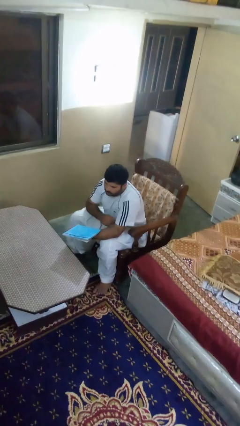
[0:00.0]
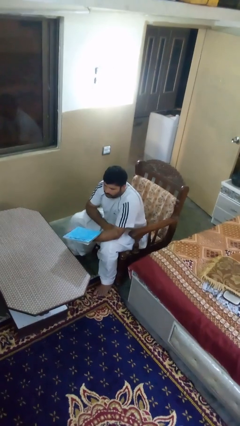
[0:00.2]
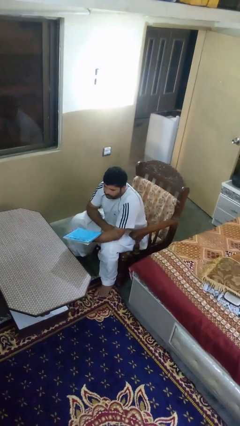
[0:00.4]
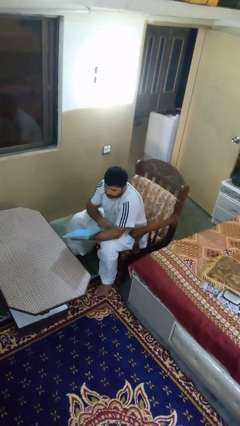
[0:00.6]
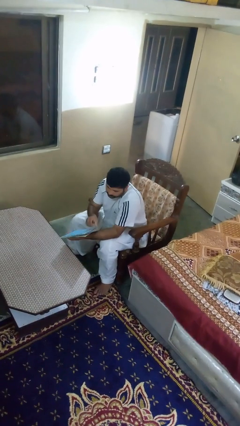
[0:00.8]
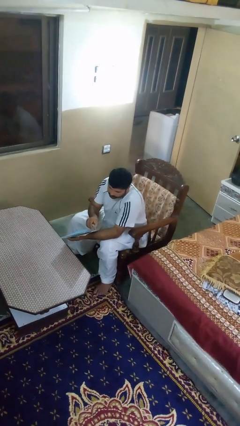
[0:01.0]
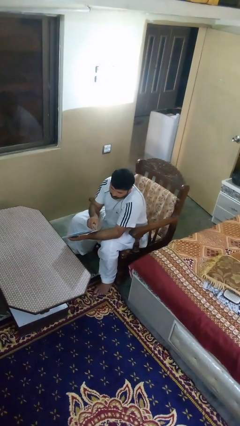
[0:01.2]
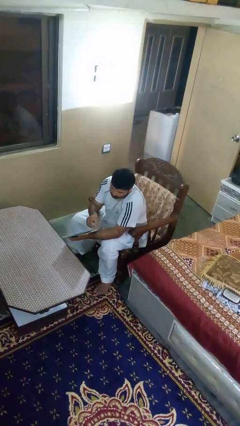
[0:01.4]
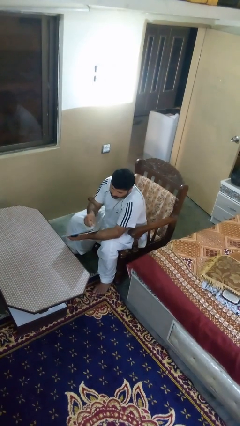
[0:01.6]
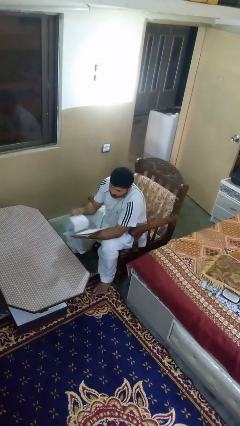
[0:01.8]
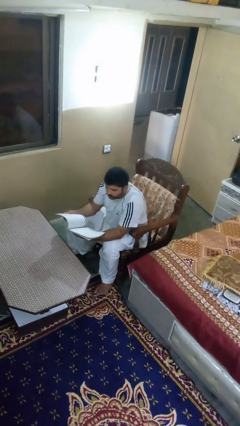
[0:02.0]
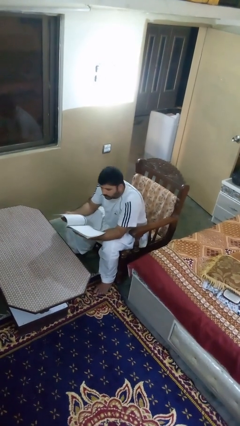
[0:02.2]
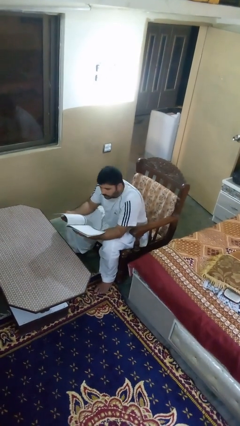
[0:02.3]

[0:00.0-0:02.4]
person reads magazine

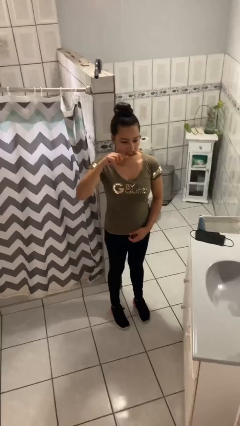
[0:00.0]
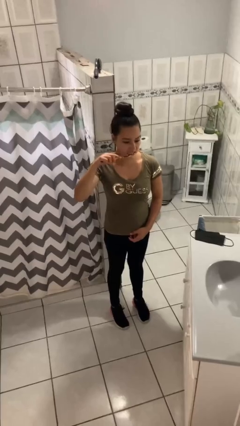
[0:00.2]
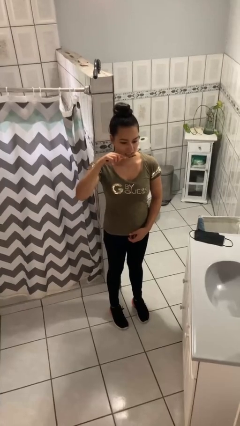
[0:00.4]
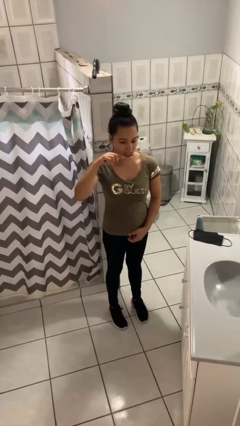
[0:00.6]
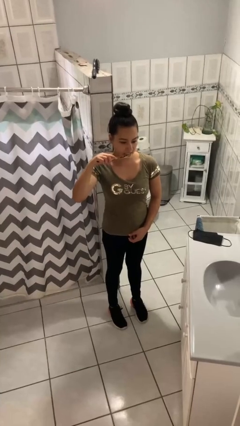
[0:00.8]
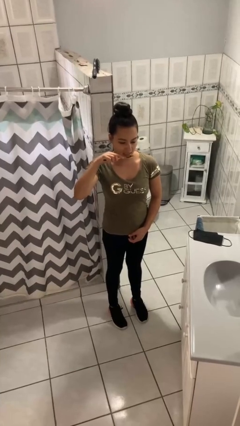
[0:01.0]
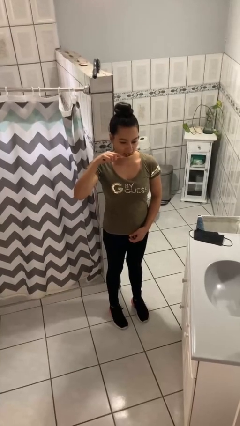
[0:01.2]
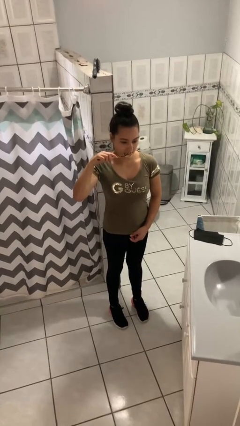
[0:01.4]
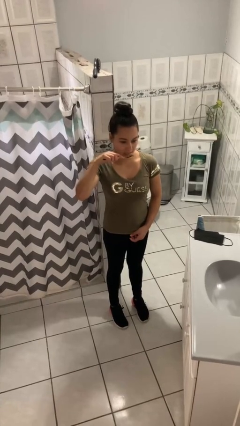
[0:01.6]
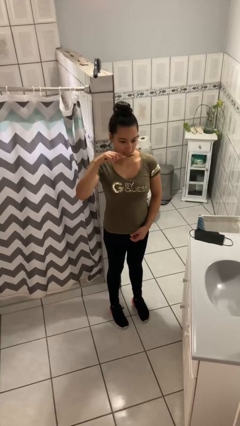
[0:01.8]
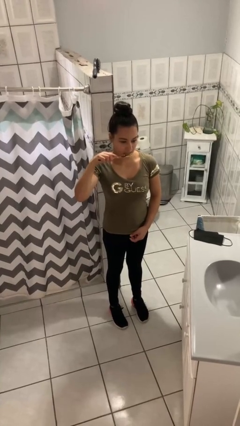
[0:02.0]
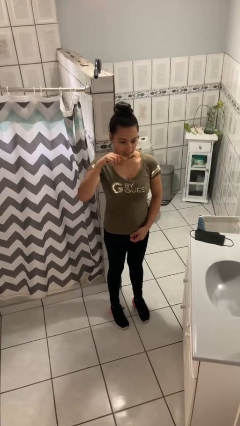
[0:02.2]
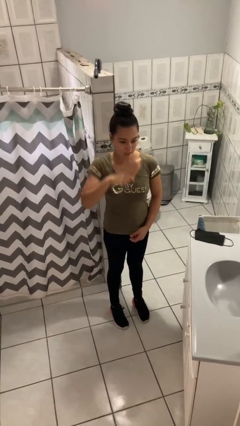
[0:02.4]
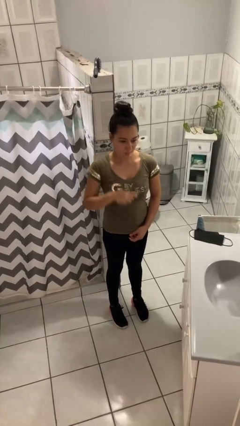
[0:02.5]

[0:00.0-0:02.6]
person brushes teeth

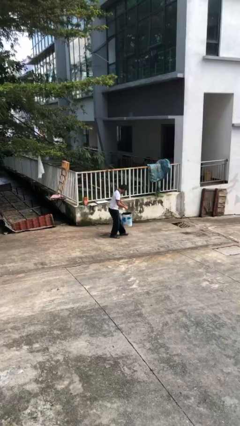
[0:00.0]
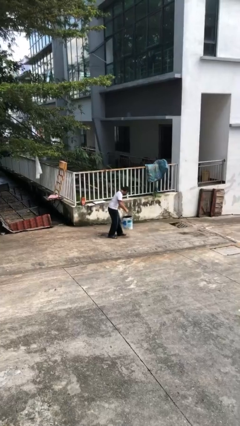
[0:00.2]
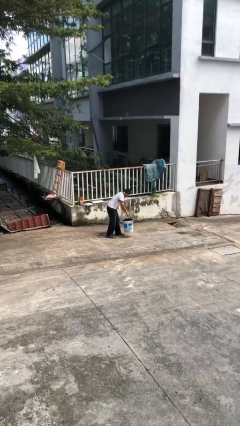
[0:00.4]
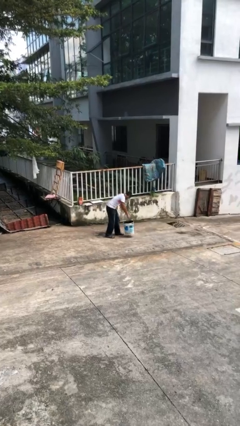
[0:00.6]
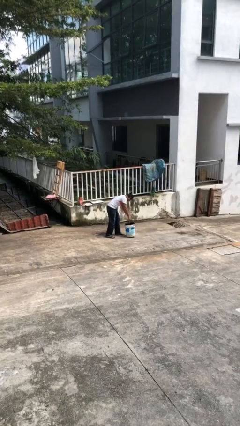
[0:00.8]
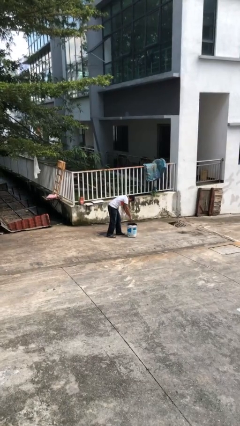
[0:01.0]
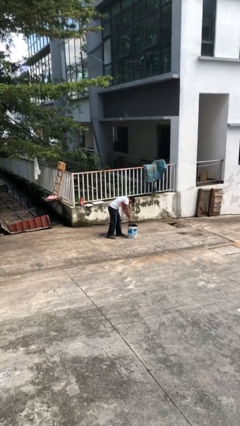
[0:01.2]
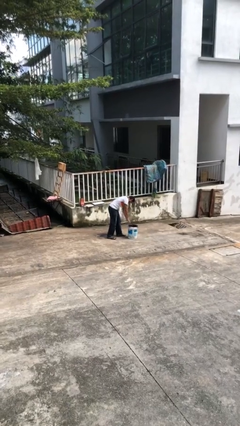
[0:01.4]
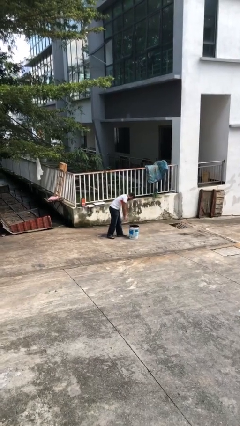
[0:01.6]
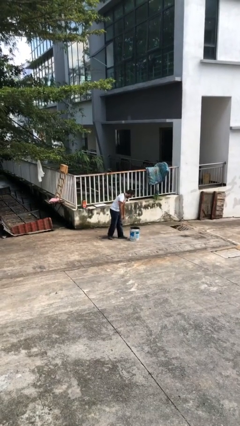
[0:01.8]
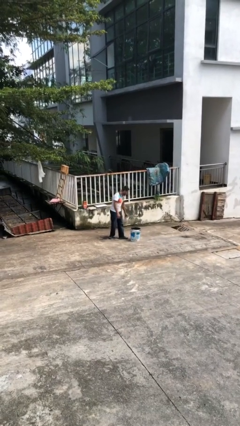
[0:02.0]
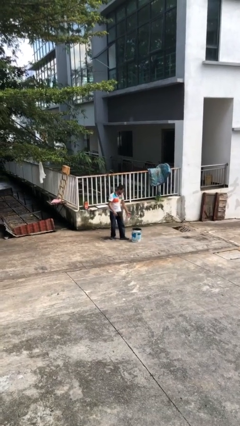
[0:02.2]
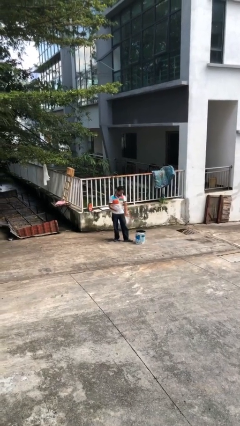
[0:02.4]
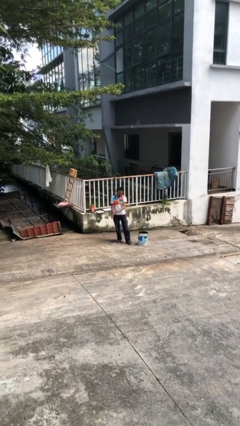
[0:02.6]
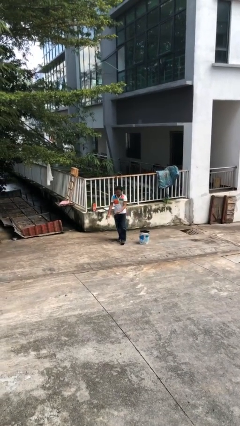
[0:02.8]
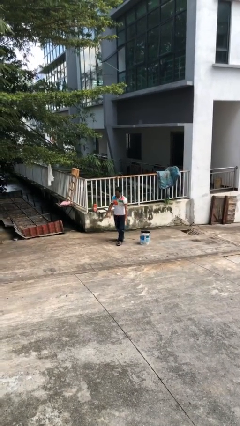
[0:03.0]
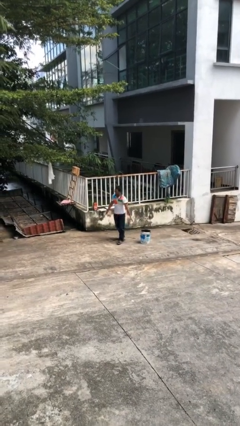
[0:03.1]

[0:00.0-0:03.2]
person puts down object on floor

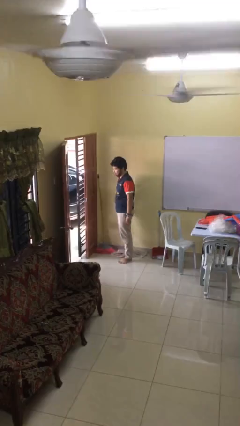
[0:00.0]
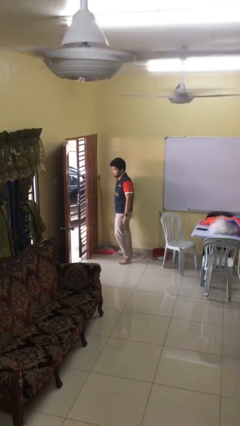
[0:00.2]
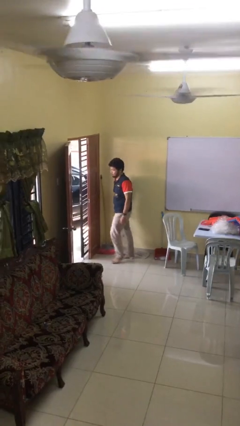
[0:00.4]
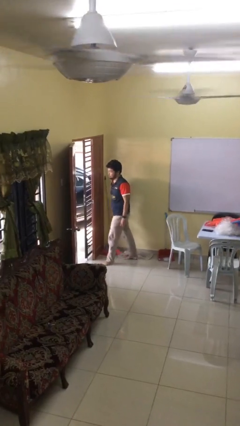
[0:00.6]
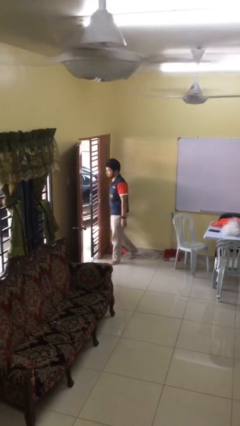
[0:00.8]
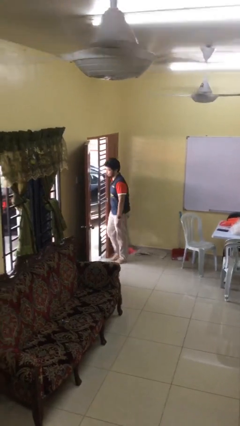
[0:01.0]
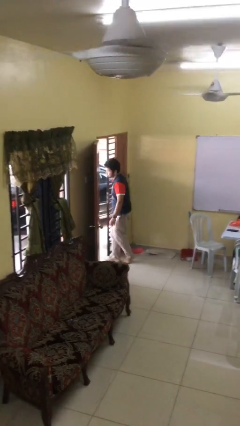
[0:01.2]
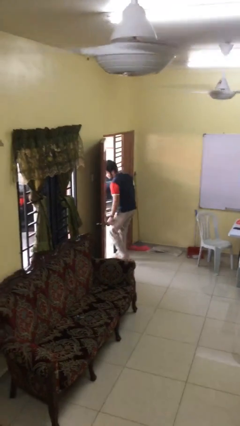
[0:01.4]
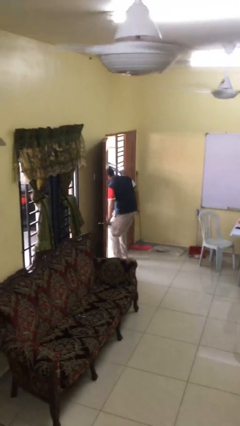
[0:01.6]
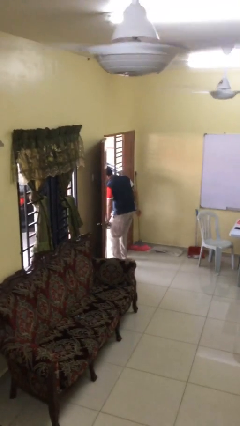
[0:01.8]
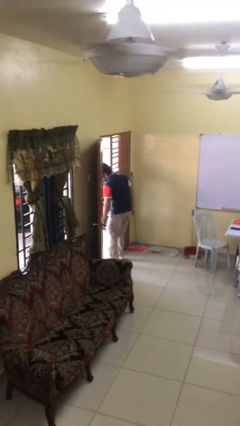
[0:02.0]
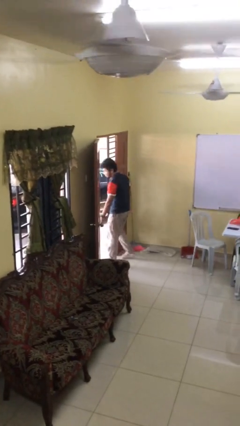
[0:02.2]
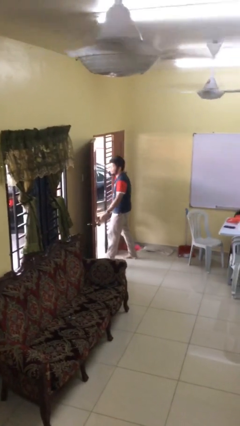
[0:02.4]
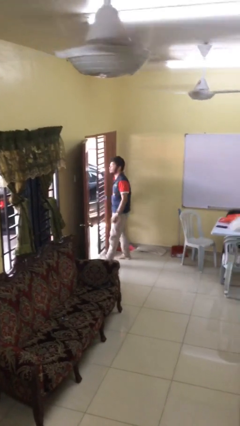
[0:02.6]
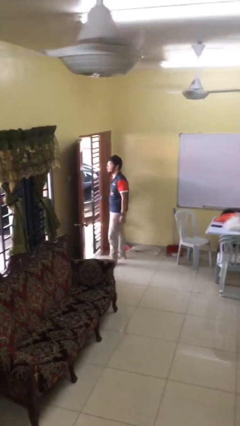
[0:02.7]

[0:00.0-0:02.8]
person bumps into wall

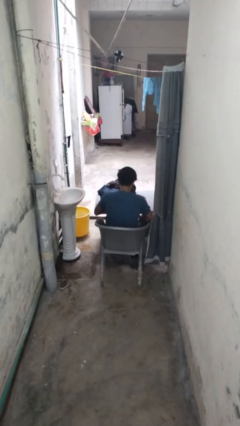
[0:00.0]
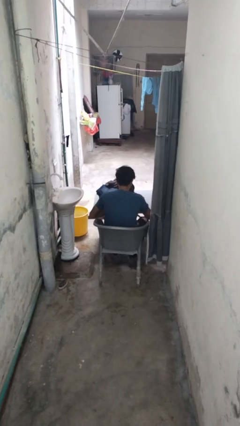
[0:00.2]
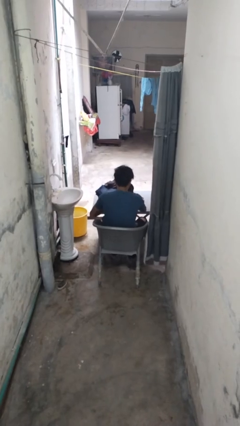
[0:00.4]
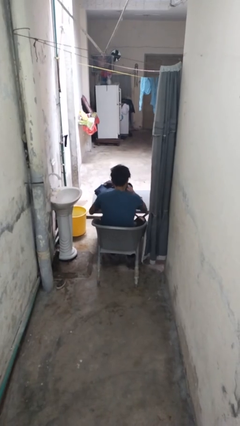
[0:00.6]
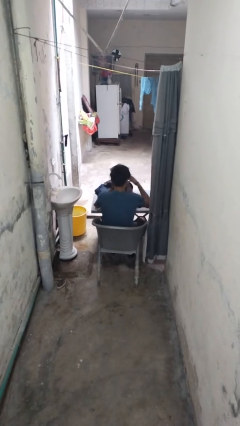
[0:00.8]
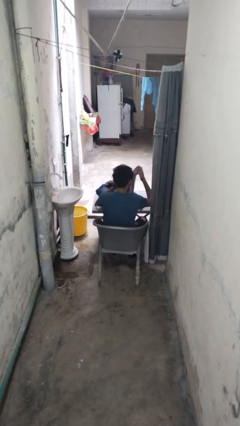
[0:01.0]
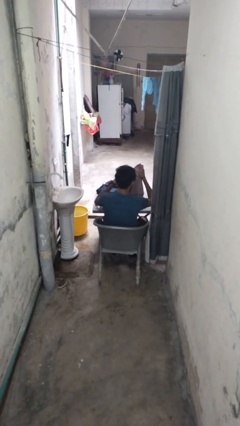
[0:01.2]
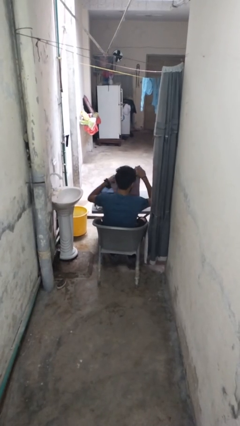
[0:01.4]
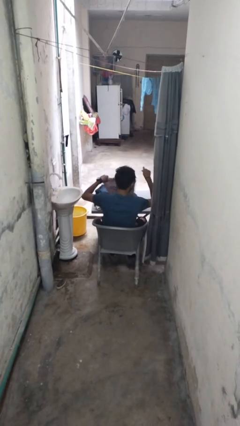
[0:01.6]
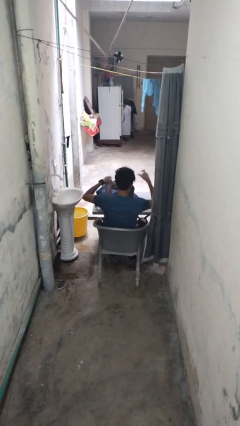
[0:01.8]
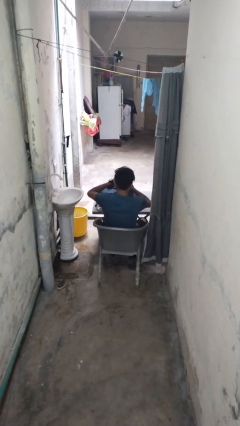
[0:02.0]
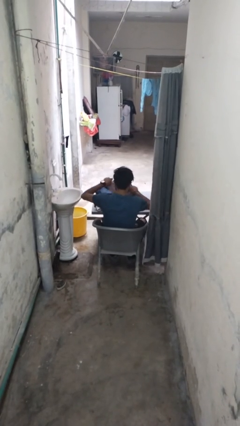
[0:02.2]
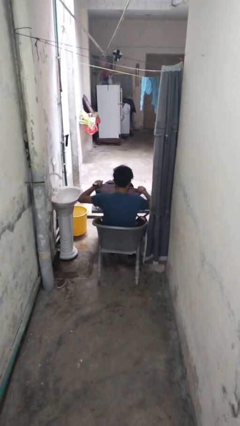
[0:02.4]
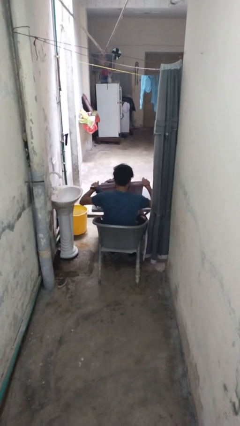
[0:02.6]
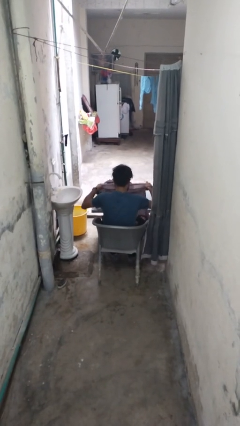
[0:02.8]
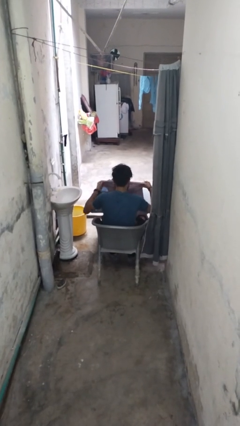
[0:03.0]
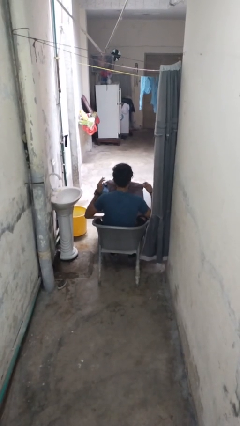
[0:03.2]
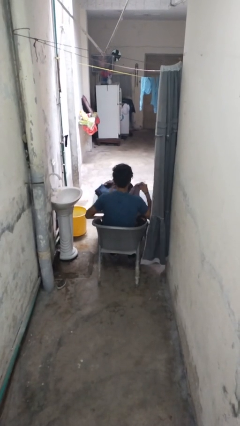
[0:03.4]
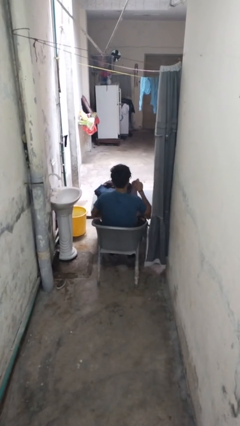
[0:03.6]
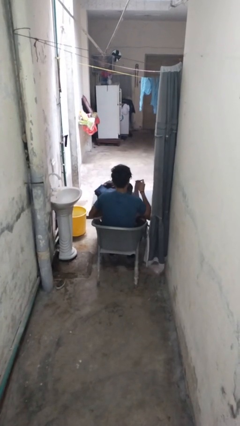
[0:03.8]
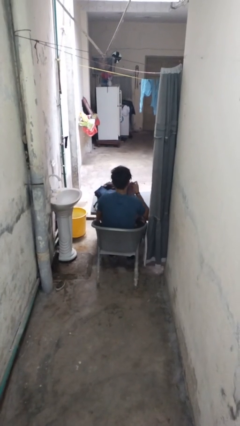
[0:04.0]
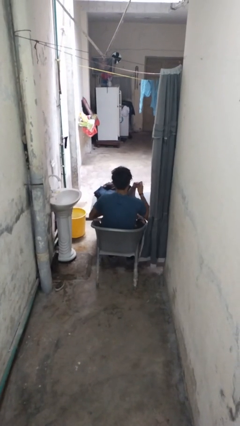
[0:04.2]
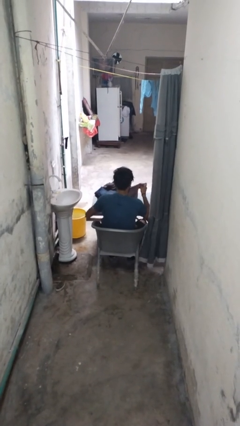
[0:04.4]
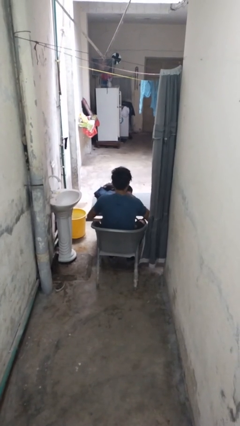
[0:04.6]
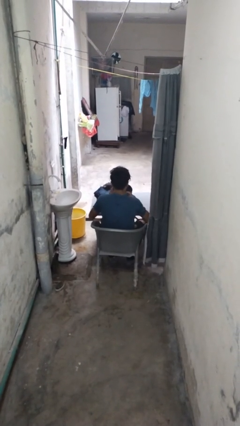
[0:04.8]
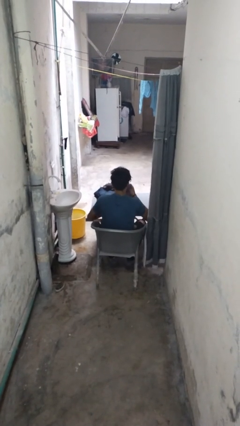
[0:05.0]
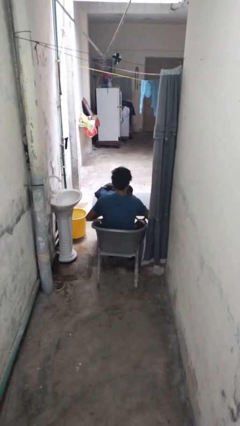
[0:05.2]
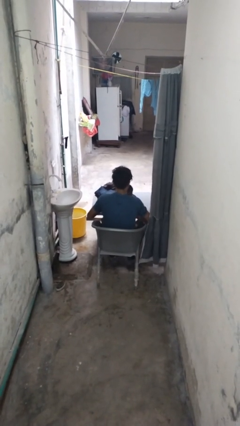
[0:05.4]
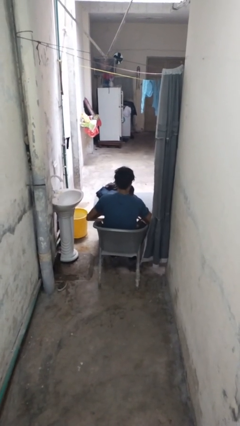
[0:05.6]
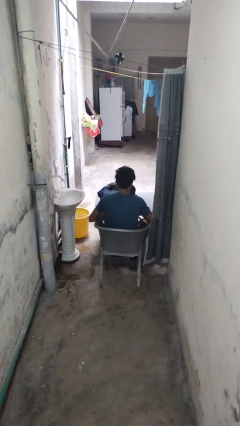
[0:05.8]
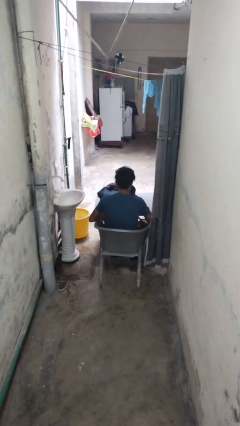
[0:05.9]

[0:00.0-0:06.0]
person folds shirt

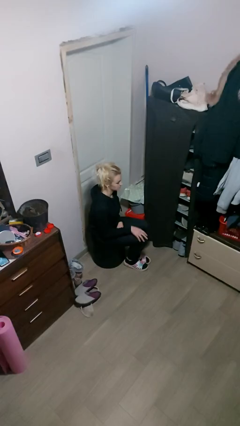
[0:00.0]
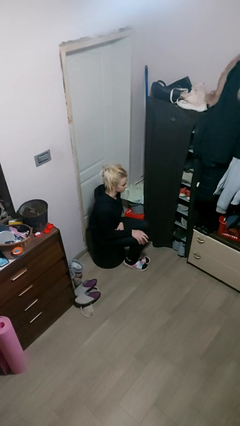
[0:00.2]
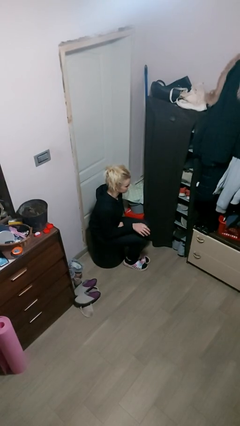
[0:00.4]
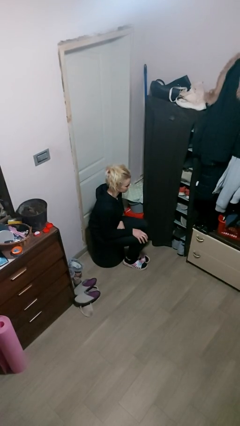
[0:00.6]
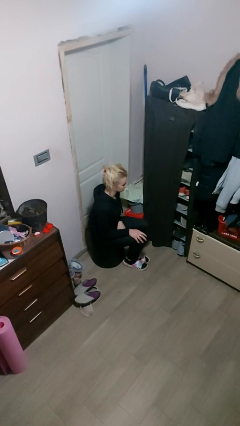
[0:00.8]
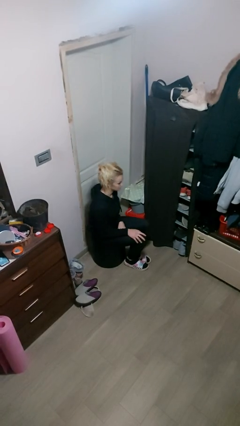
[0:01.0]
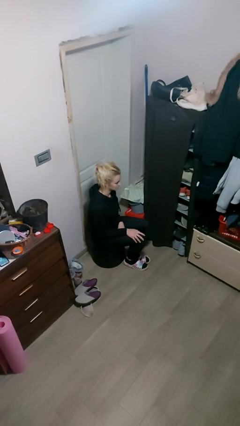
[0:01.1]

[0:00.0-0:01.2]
person slaps hands on thighs
